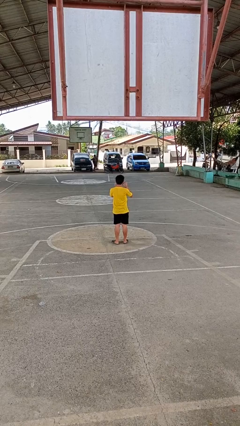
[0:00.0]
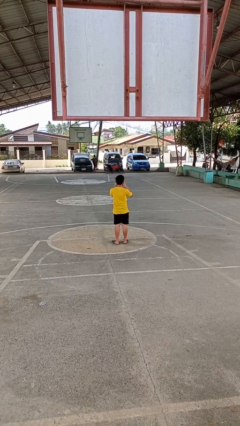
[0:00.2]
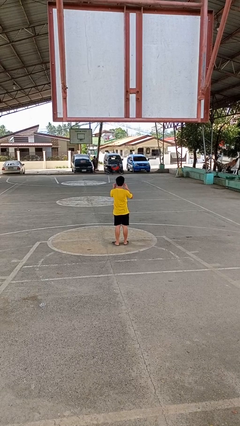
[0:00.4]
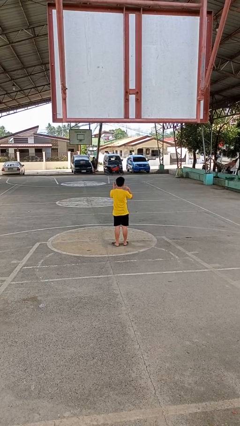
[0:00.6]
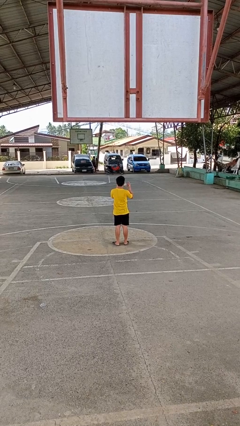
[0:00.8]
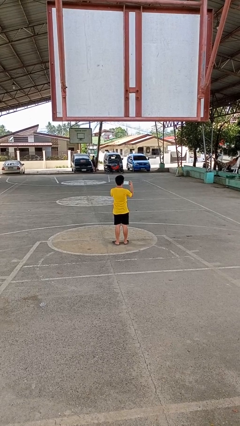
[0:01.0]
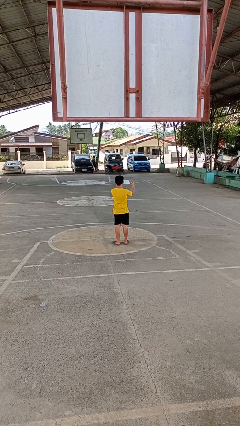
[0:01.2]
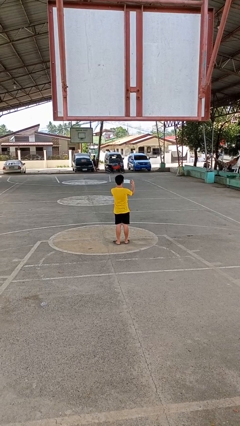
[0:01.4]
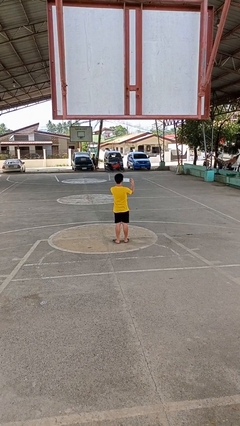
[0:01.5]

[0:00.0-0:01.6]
person takes off facemask

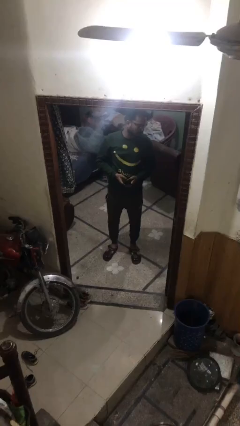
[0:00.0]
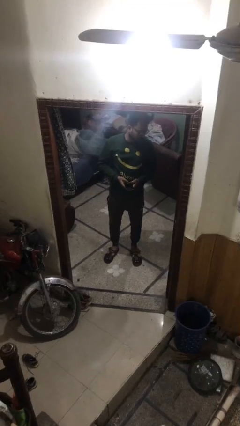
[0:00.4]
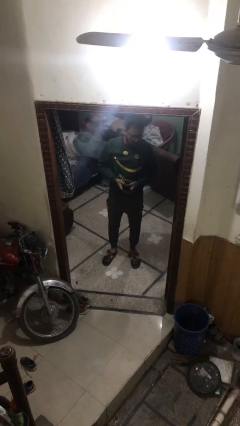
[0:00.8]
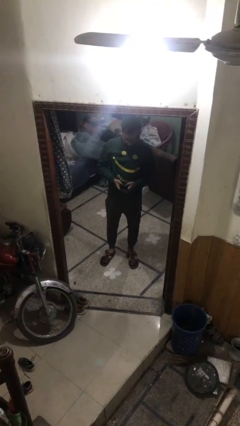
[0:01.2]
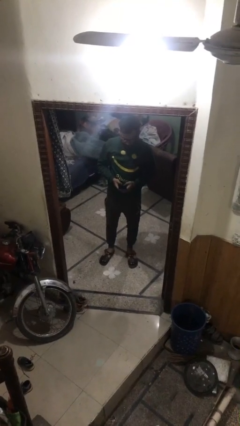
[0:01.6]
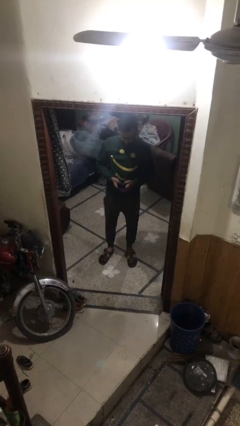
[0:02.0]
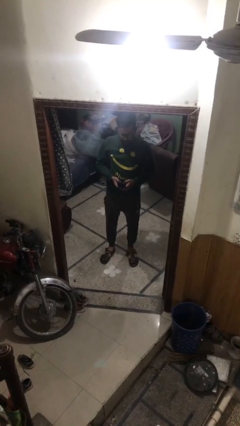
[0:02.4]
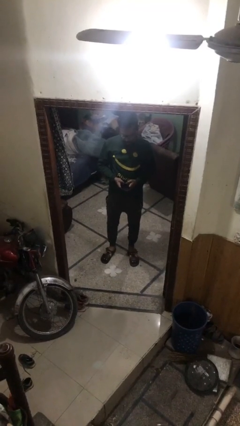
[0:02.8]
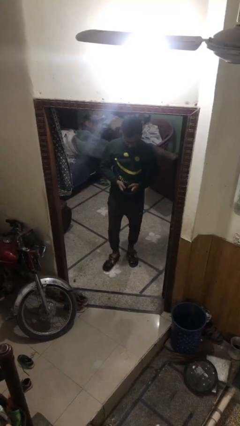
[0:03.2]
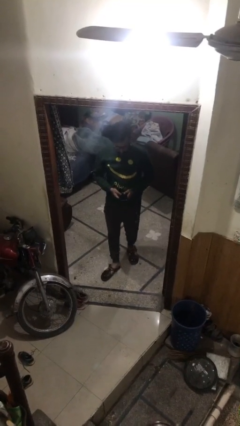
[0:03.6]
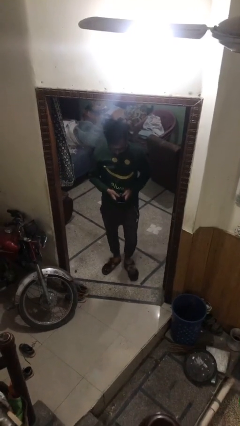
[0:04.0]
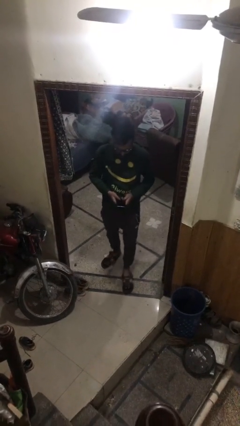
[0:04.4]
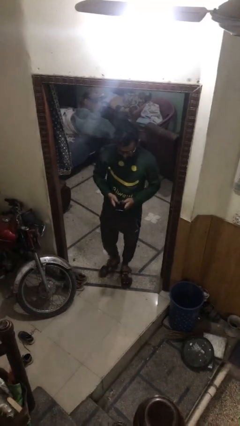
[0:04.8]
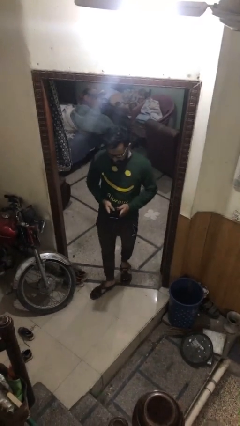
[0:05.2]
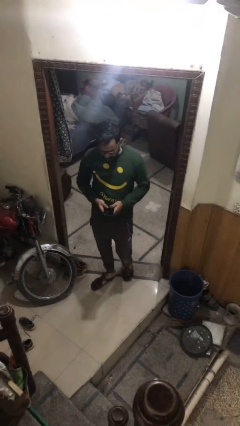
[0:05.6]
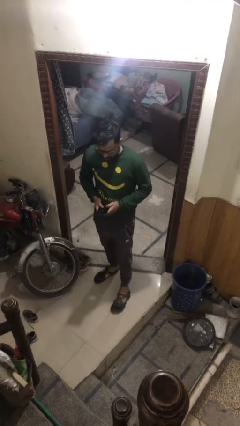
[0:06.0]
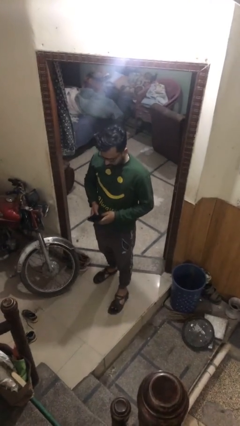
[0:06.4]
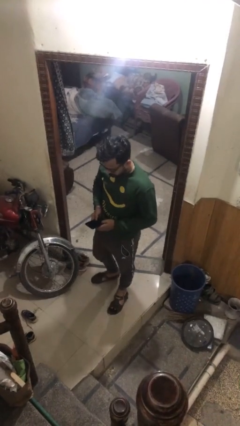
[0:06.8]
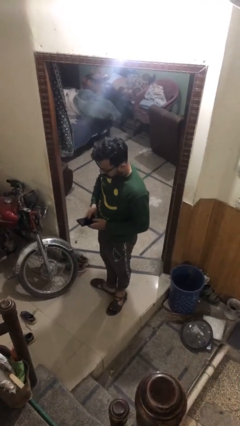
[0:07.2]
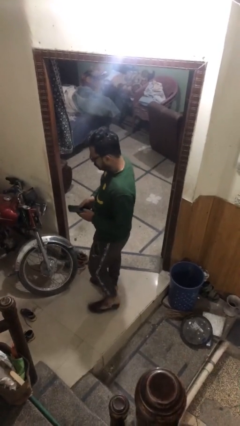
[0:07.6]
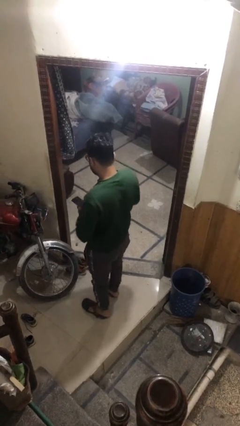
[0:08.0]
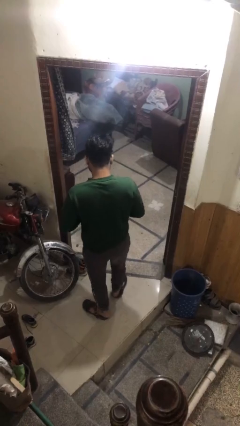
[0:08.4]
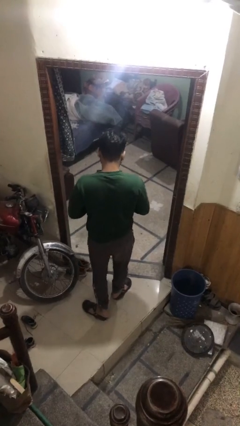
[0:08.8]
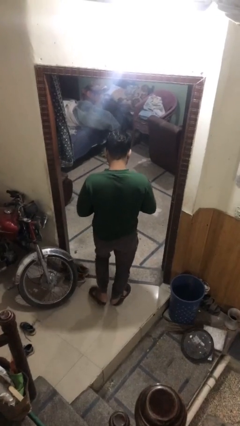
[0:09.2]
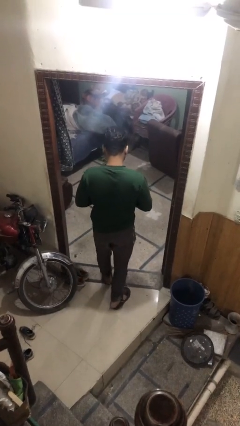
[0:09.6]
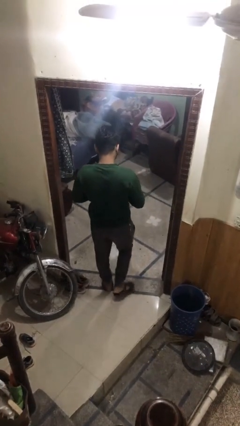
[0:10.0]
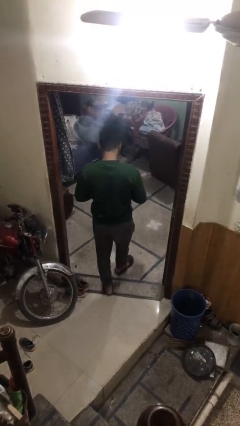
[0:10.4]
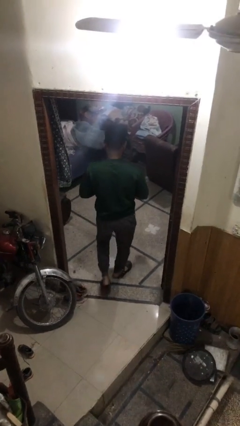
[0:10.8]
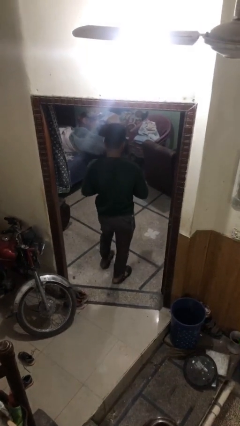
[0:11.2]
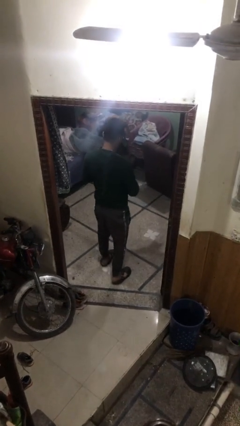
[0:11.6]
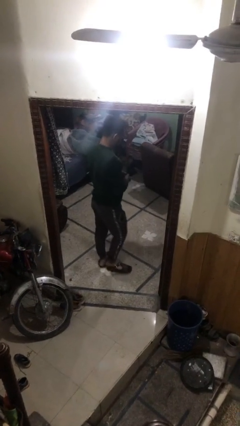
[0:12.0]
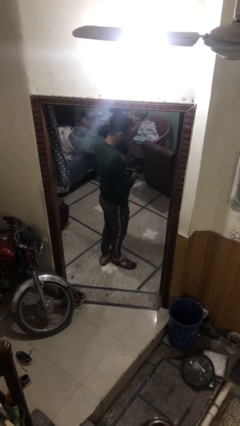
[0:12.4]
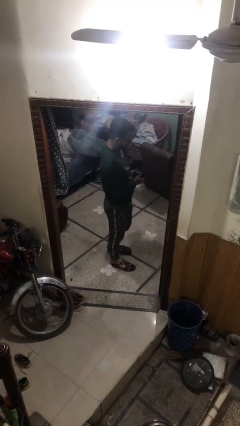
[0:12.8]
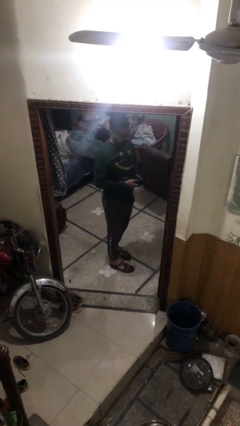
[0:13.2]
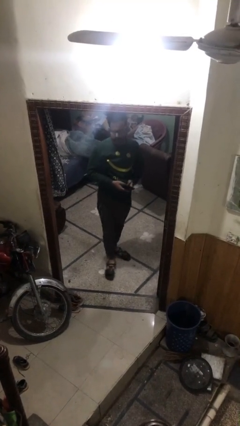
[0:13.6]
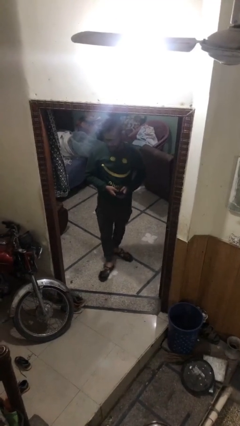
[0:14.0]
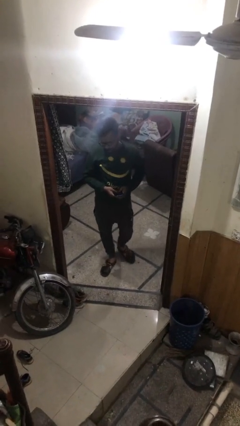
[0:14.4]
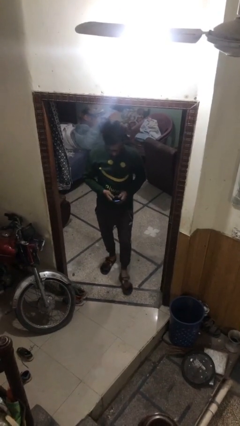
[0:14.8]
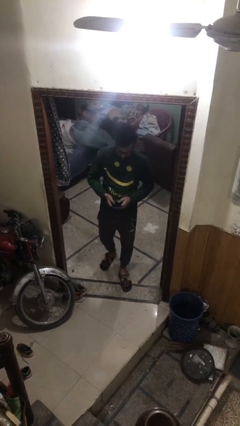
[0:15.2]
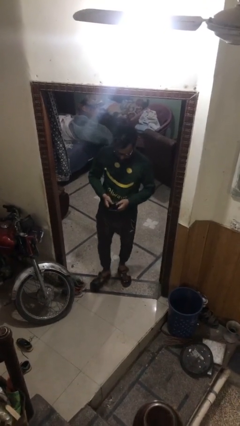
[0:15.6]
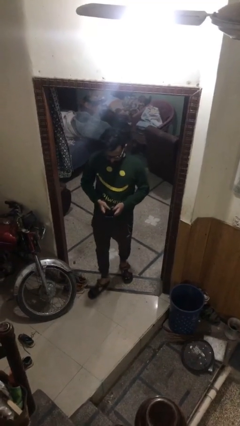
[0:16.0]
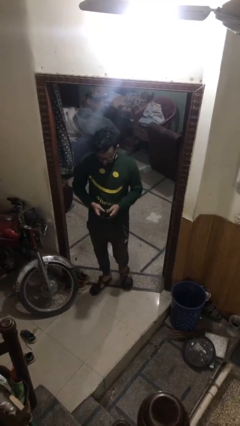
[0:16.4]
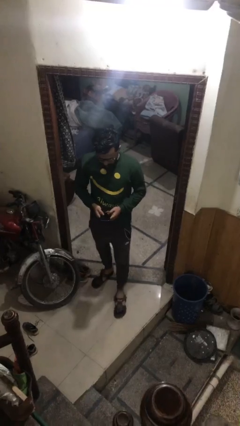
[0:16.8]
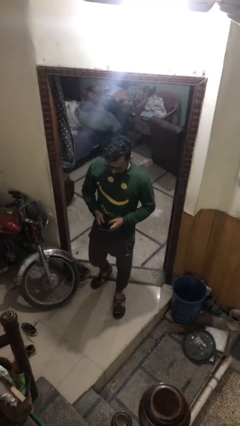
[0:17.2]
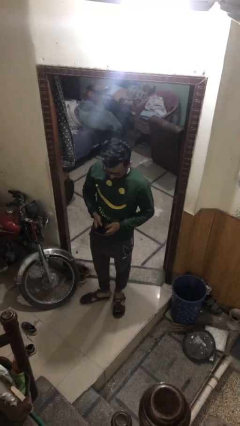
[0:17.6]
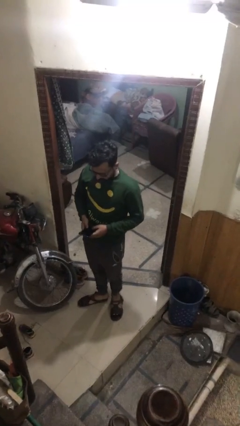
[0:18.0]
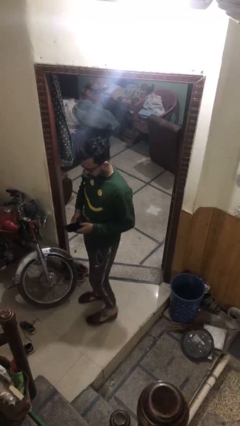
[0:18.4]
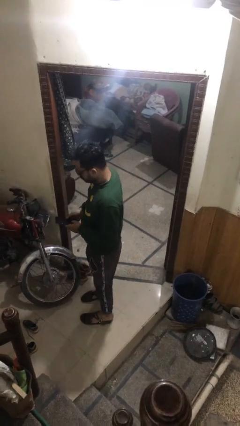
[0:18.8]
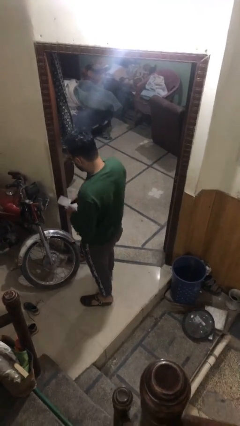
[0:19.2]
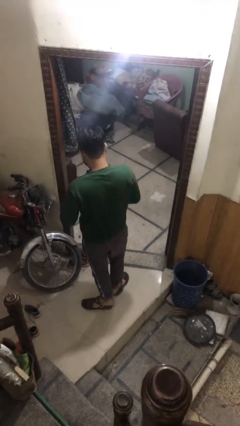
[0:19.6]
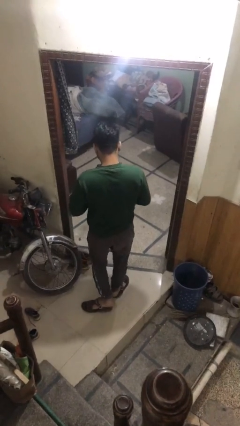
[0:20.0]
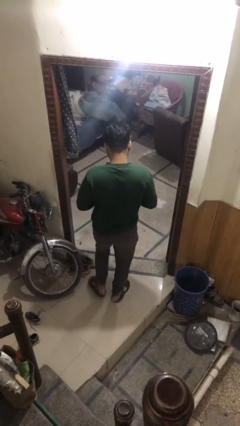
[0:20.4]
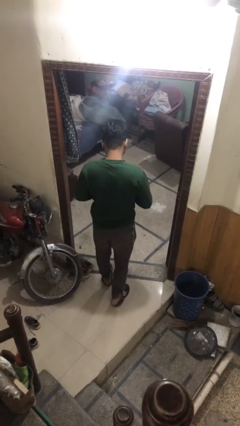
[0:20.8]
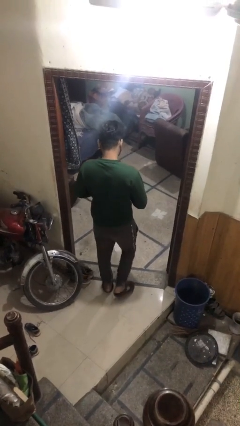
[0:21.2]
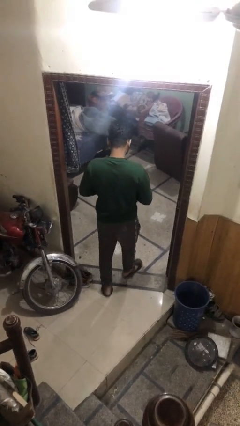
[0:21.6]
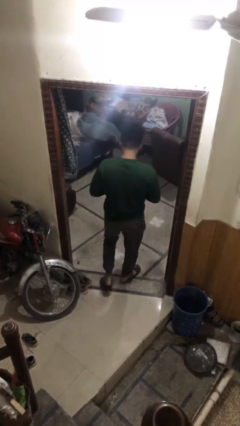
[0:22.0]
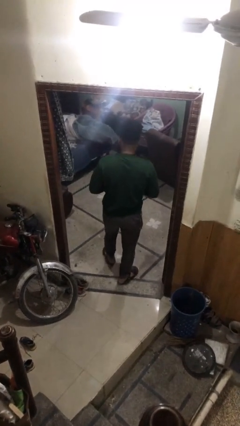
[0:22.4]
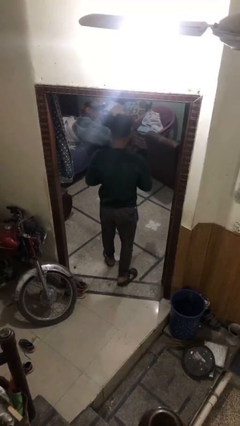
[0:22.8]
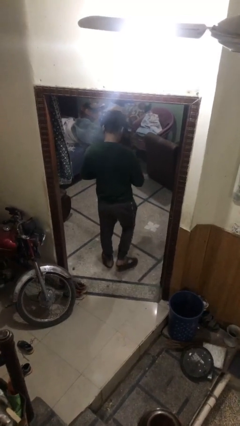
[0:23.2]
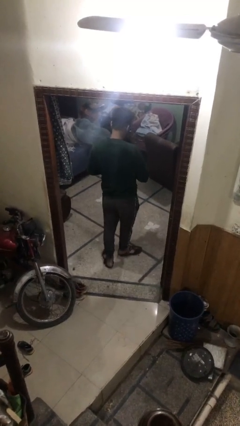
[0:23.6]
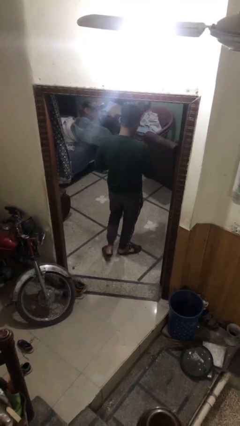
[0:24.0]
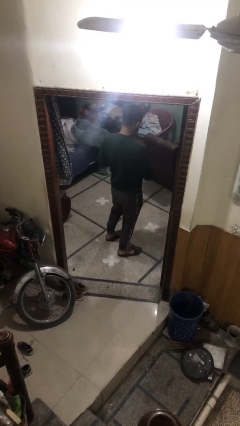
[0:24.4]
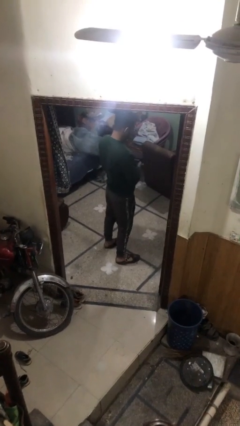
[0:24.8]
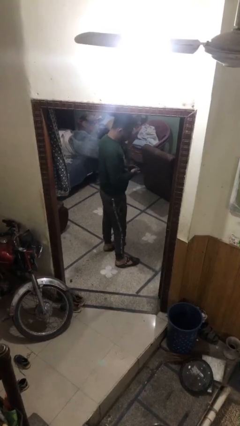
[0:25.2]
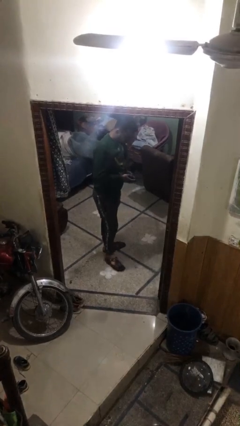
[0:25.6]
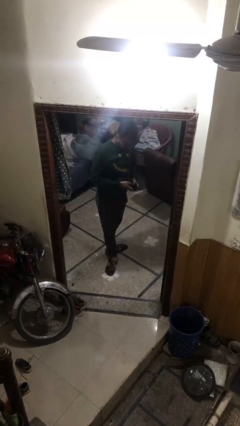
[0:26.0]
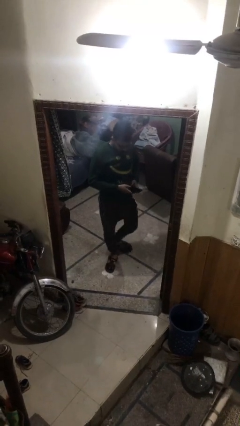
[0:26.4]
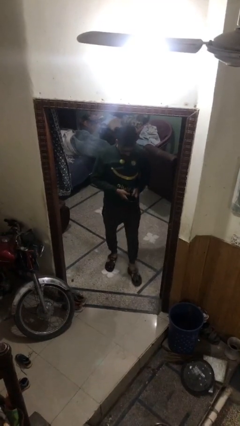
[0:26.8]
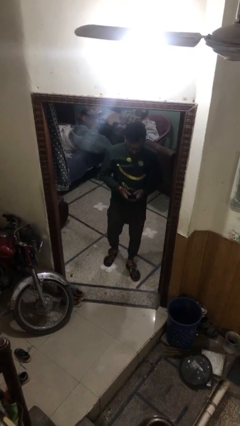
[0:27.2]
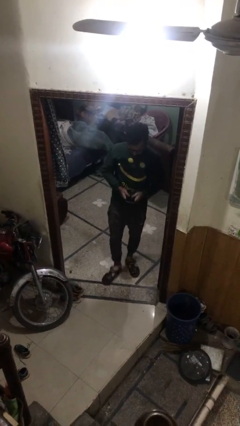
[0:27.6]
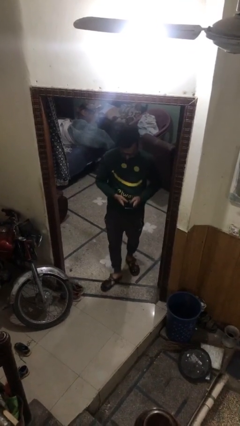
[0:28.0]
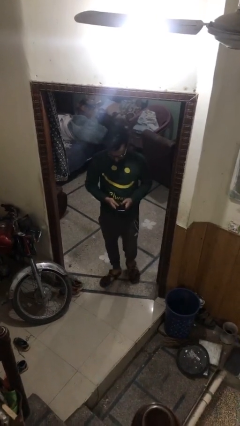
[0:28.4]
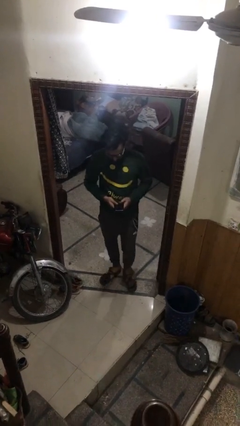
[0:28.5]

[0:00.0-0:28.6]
person texts on phone

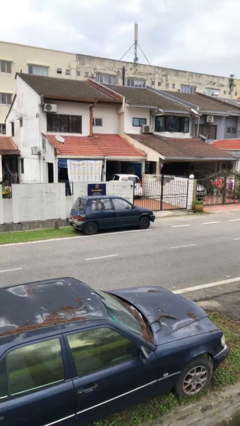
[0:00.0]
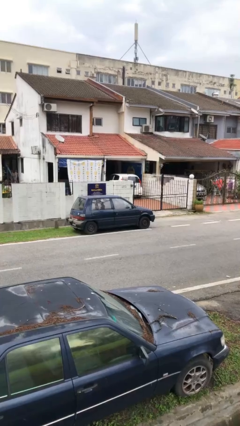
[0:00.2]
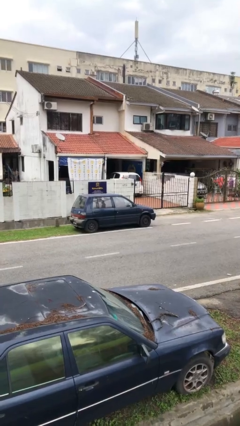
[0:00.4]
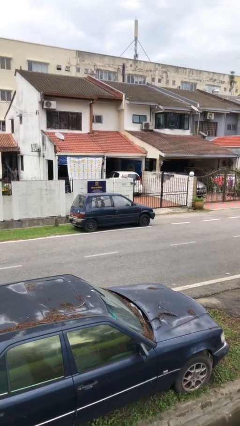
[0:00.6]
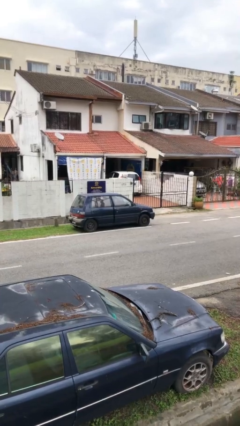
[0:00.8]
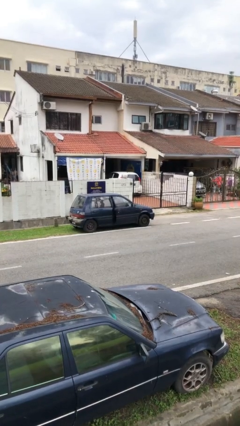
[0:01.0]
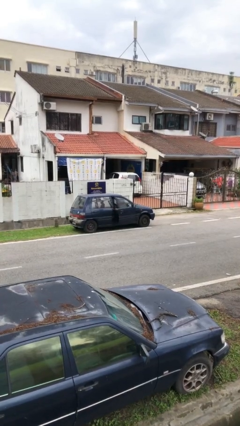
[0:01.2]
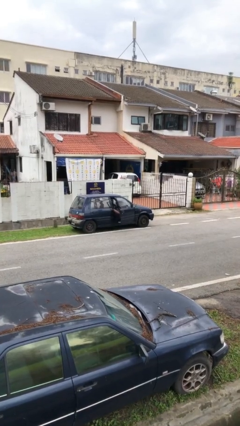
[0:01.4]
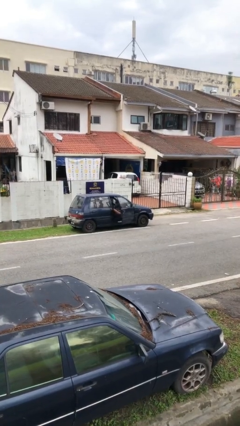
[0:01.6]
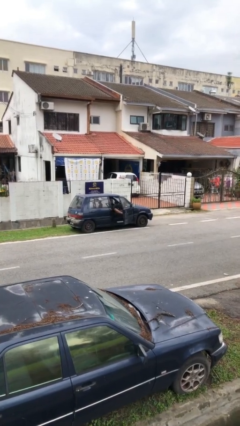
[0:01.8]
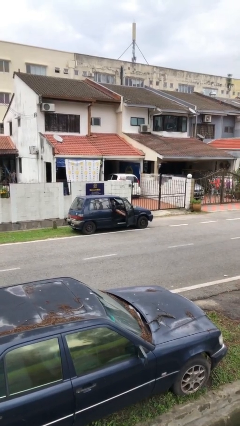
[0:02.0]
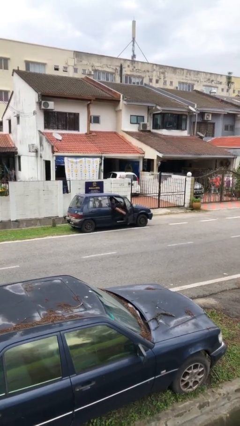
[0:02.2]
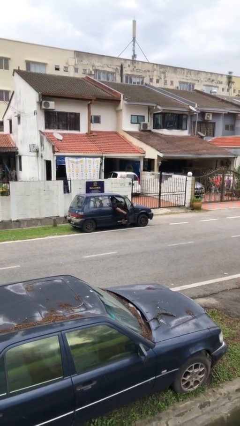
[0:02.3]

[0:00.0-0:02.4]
person opens car door
